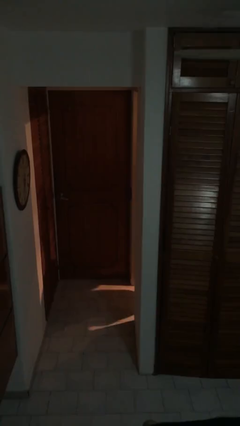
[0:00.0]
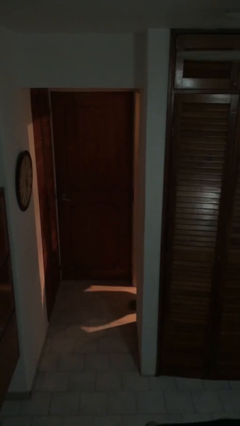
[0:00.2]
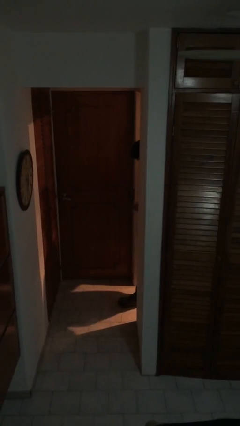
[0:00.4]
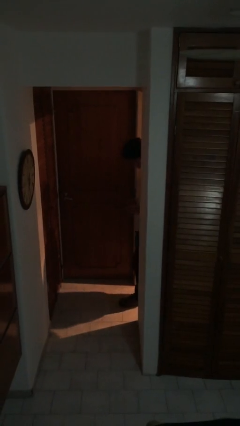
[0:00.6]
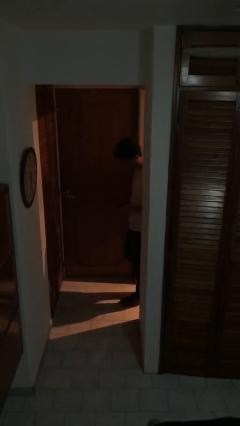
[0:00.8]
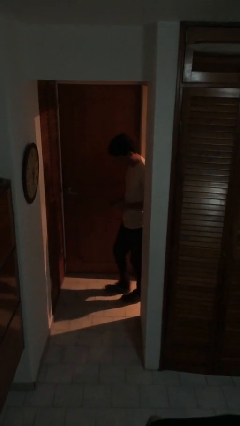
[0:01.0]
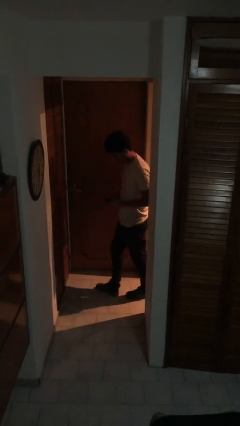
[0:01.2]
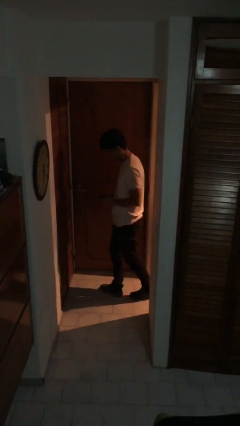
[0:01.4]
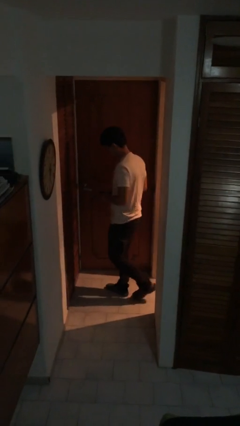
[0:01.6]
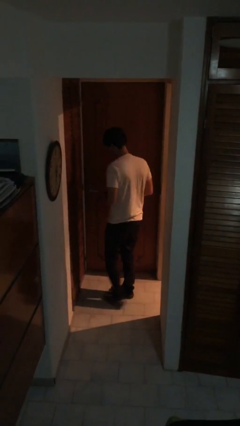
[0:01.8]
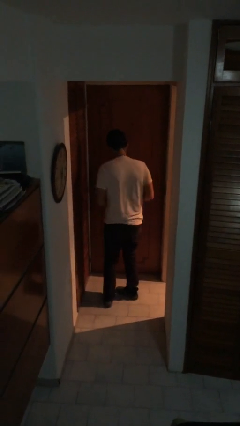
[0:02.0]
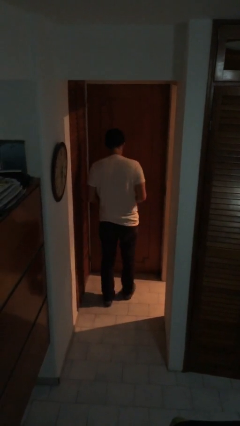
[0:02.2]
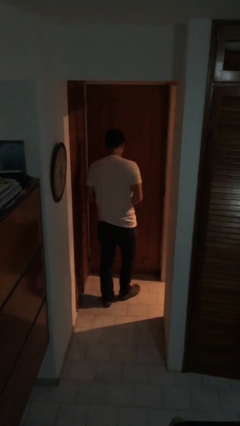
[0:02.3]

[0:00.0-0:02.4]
person enters scene through structure

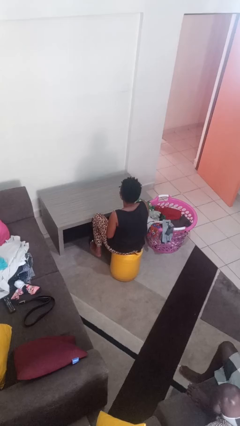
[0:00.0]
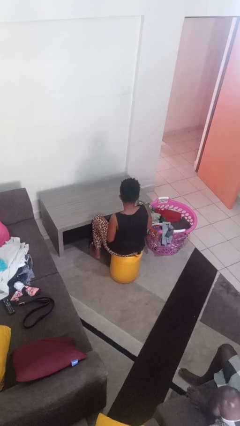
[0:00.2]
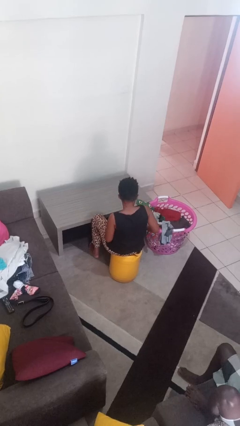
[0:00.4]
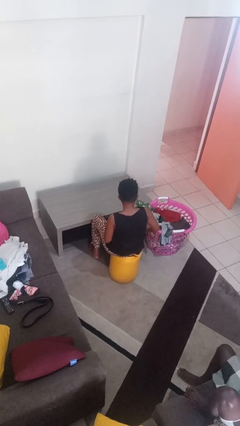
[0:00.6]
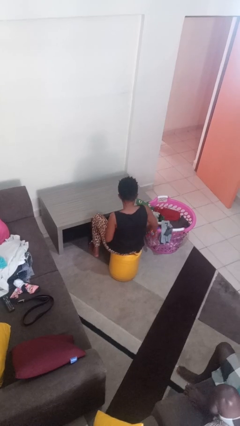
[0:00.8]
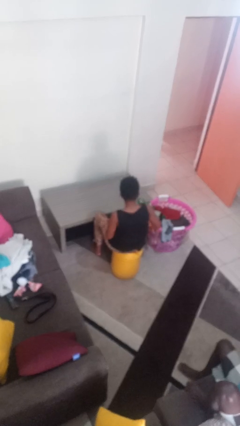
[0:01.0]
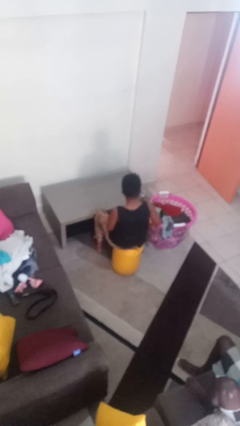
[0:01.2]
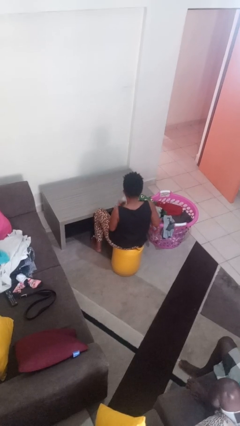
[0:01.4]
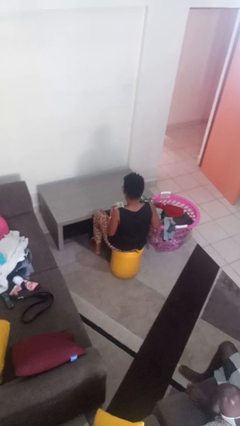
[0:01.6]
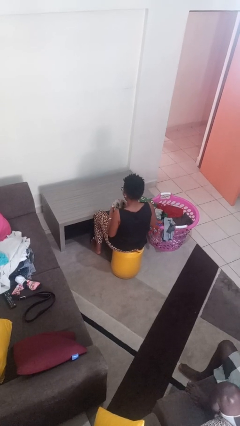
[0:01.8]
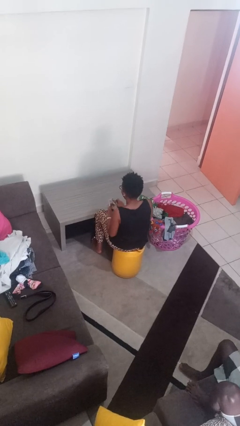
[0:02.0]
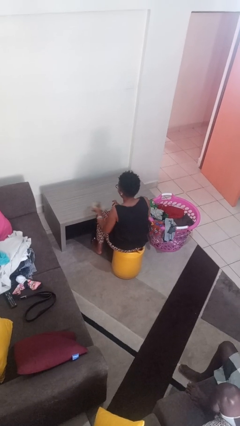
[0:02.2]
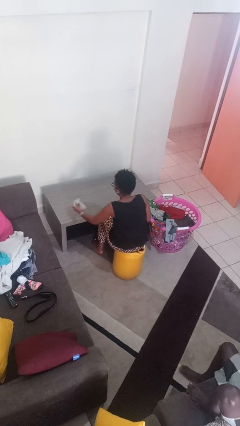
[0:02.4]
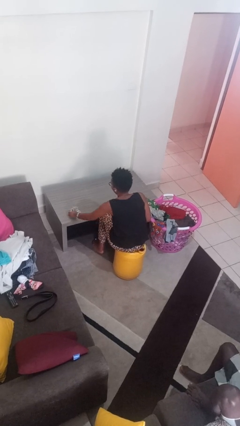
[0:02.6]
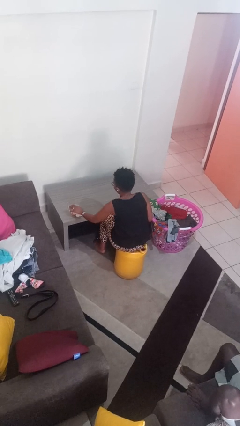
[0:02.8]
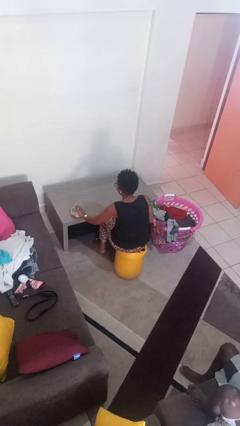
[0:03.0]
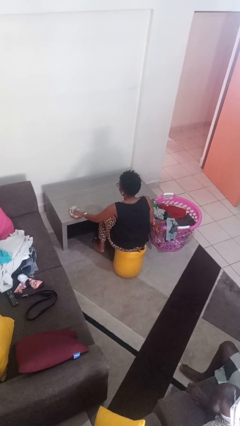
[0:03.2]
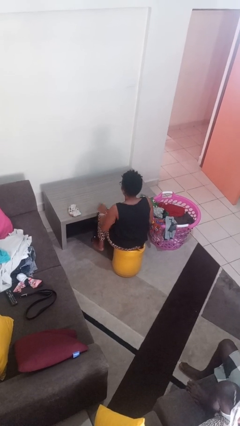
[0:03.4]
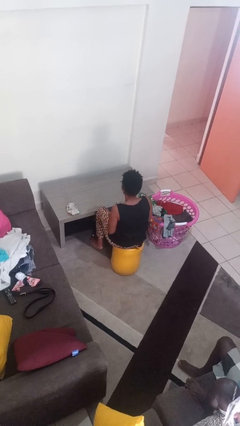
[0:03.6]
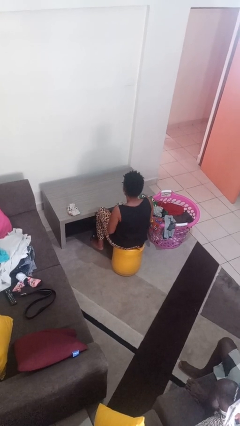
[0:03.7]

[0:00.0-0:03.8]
person folds socks

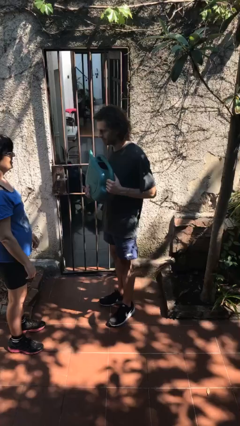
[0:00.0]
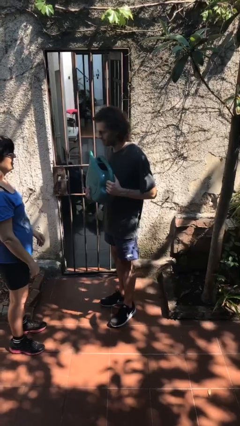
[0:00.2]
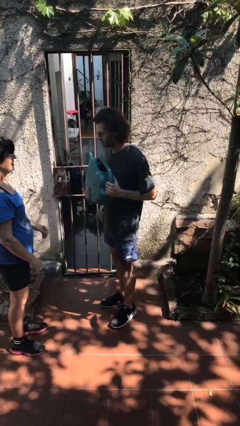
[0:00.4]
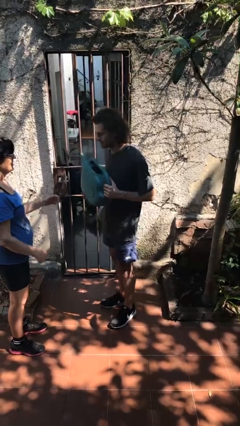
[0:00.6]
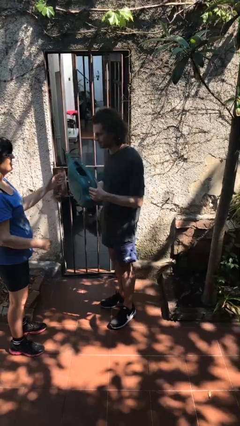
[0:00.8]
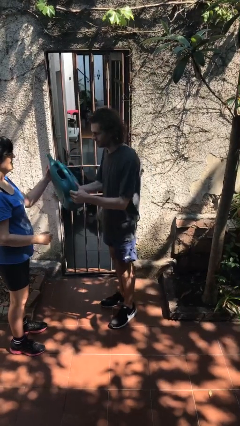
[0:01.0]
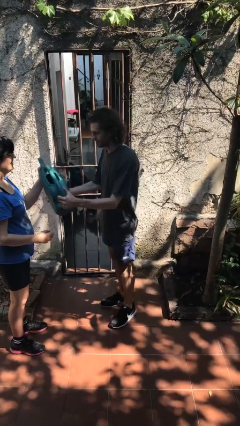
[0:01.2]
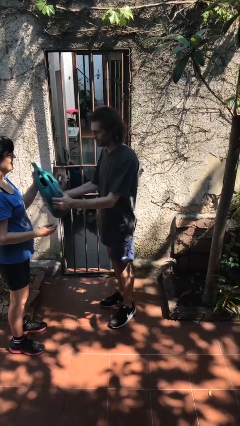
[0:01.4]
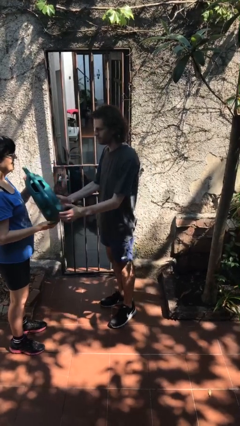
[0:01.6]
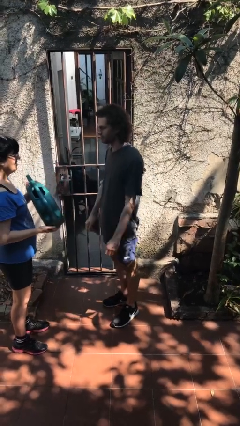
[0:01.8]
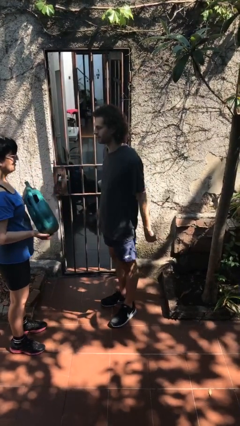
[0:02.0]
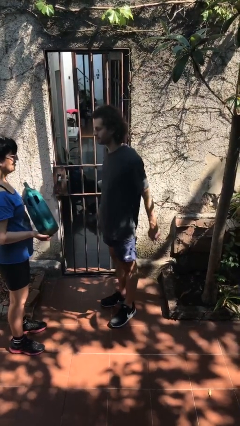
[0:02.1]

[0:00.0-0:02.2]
person transfers object to person

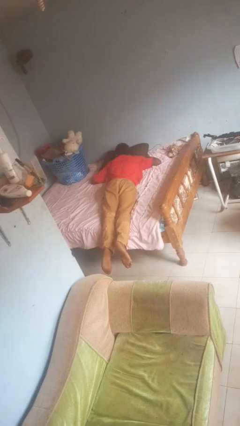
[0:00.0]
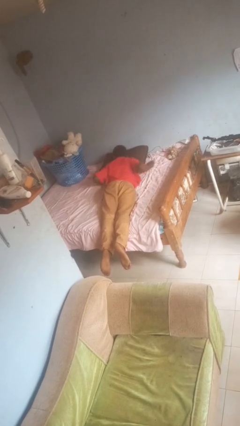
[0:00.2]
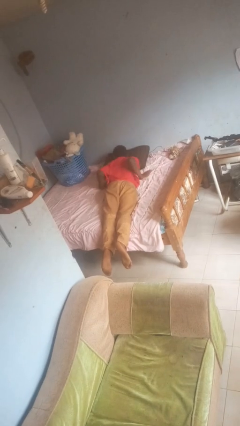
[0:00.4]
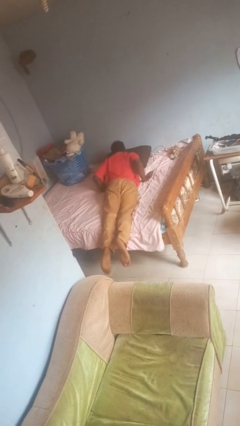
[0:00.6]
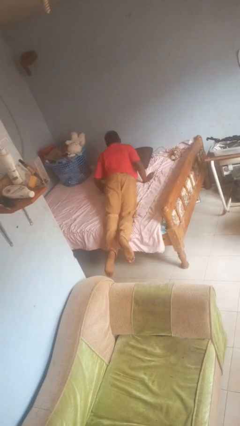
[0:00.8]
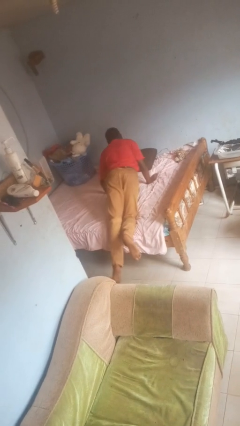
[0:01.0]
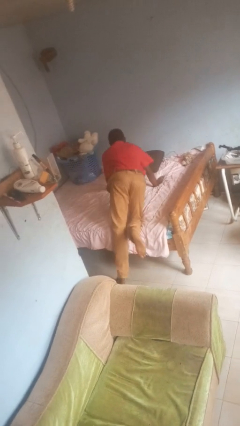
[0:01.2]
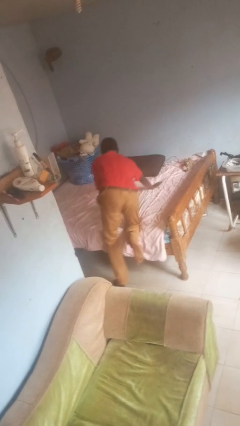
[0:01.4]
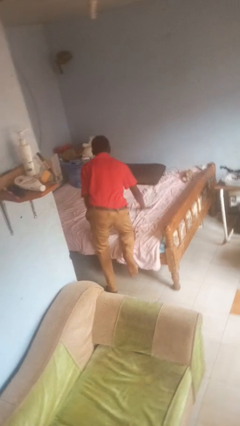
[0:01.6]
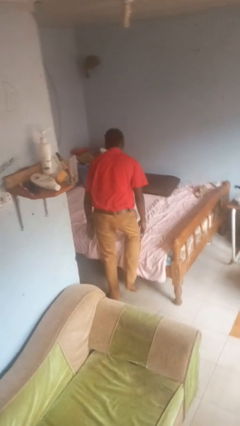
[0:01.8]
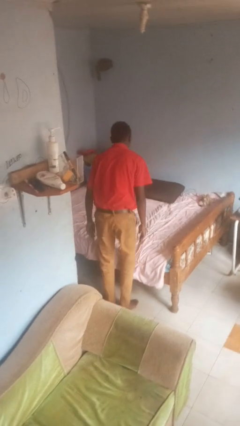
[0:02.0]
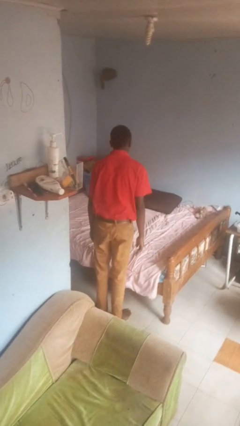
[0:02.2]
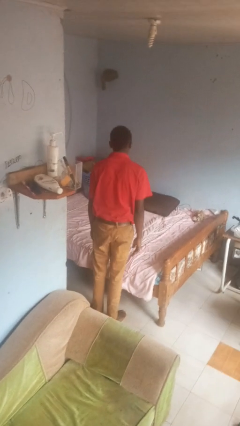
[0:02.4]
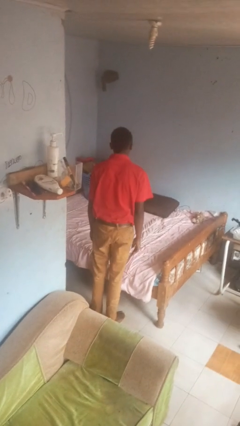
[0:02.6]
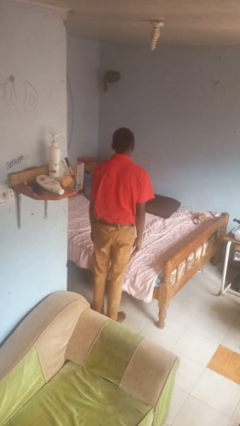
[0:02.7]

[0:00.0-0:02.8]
person stands up

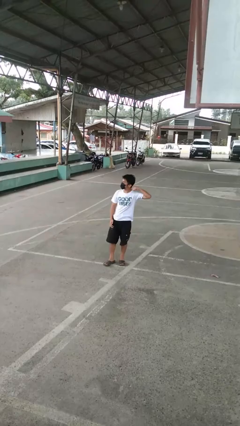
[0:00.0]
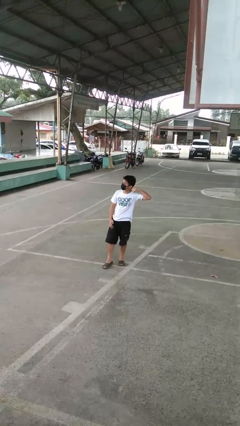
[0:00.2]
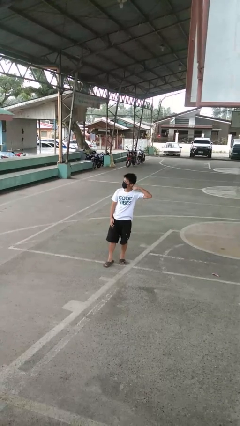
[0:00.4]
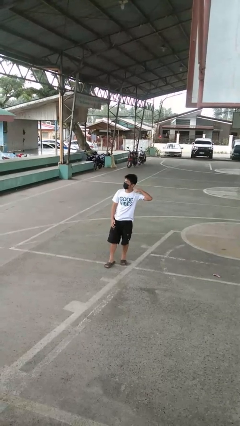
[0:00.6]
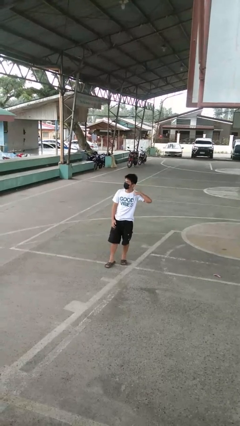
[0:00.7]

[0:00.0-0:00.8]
person gestures cut

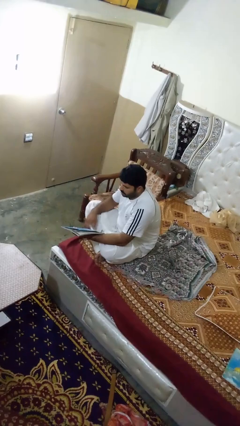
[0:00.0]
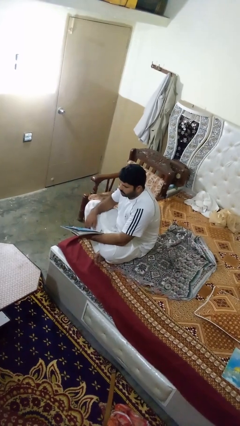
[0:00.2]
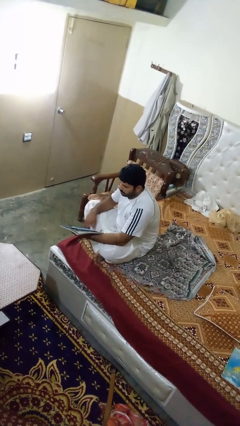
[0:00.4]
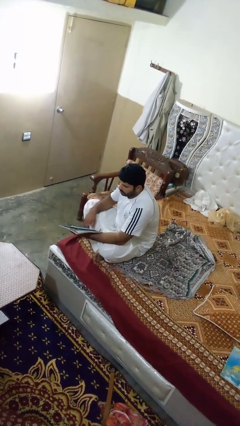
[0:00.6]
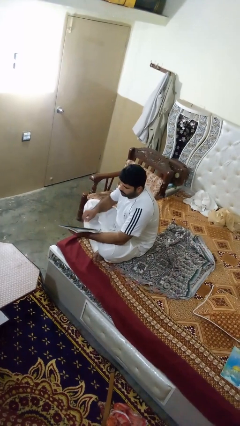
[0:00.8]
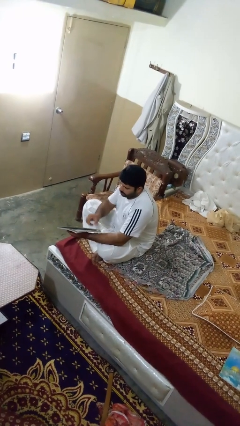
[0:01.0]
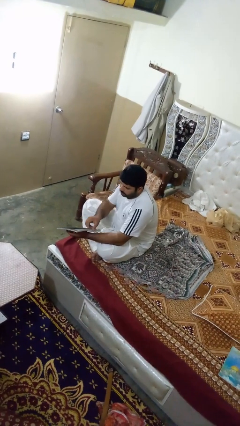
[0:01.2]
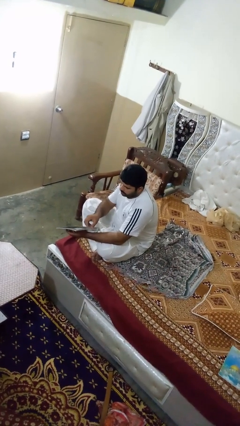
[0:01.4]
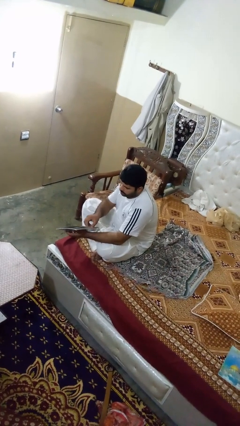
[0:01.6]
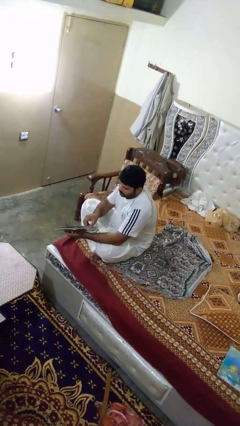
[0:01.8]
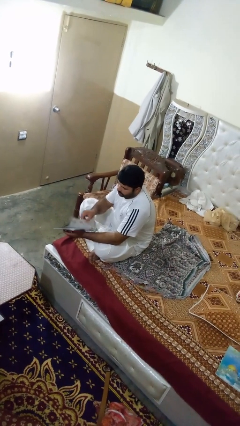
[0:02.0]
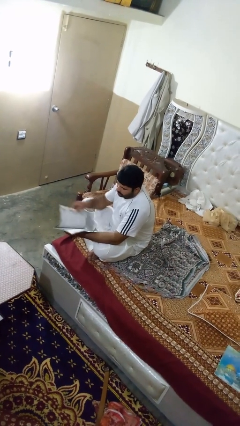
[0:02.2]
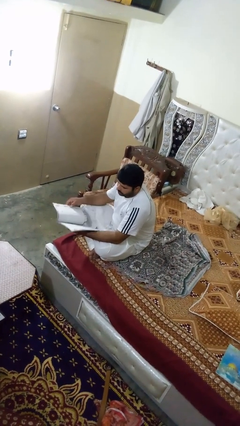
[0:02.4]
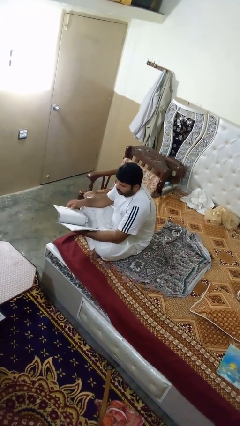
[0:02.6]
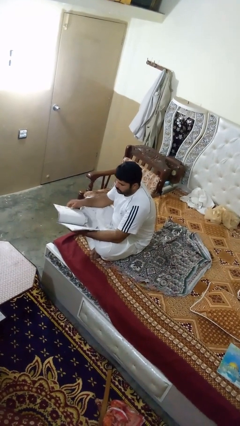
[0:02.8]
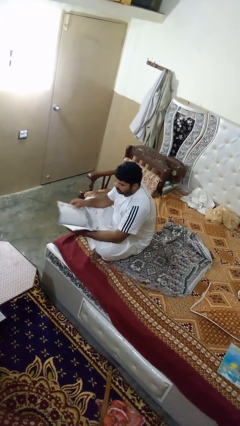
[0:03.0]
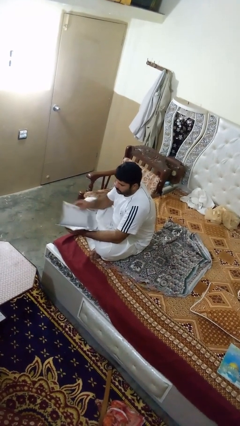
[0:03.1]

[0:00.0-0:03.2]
person reads magazine

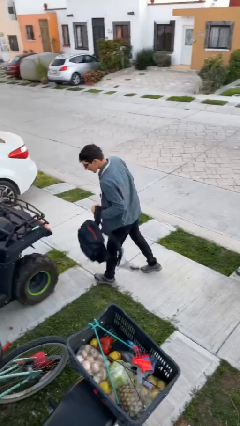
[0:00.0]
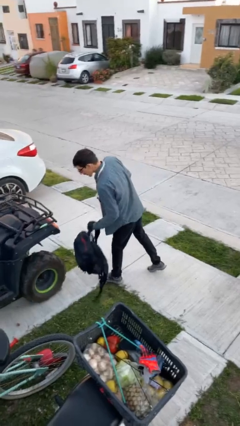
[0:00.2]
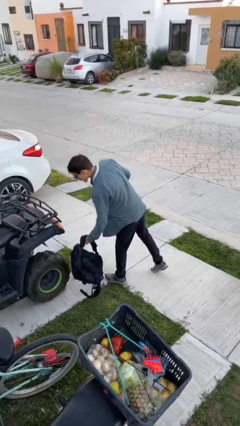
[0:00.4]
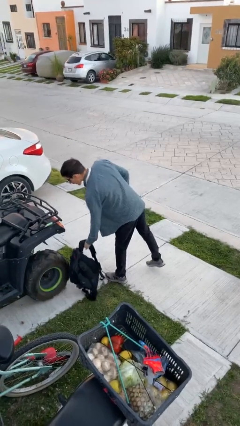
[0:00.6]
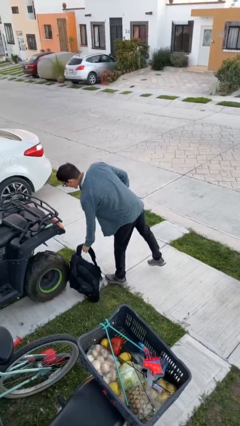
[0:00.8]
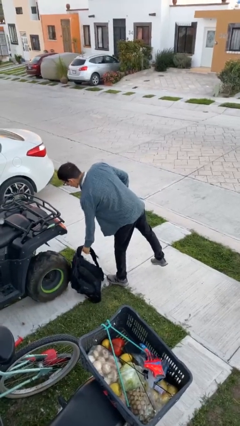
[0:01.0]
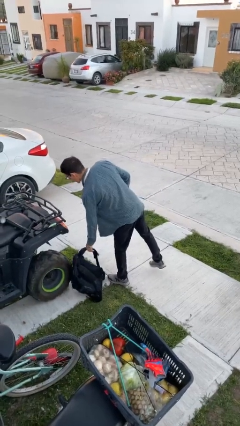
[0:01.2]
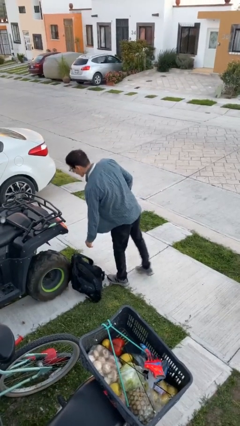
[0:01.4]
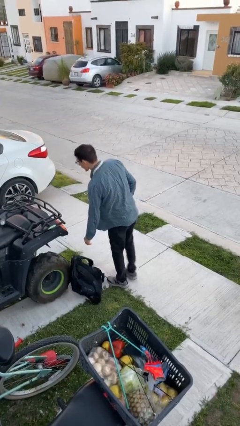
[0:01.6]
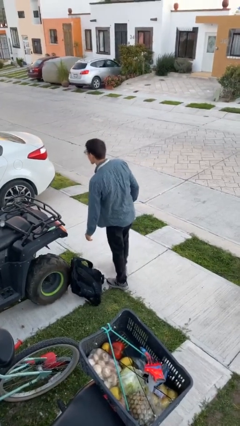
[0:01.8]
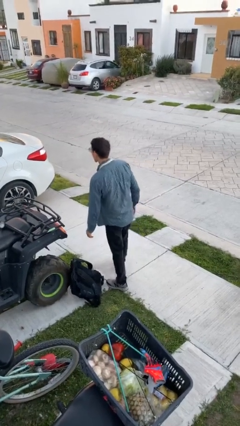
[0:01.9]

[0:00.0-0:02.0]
person puts down object on floor
